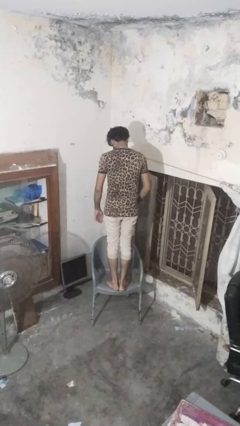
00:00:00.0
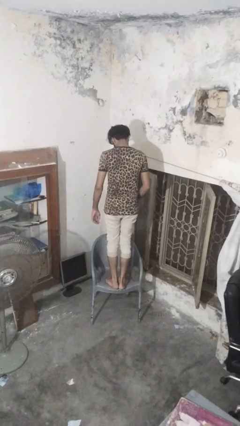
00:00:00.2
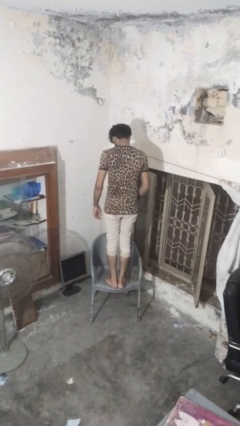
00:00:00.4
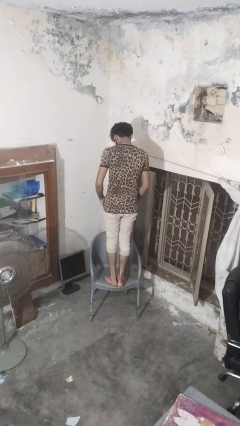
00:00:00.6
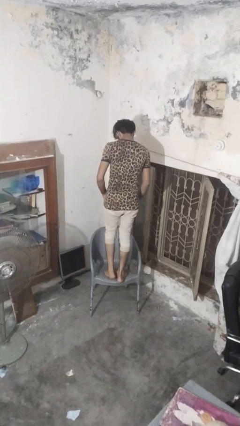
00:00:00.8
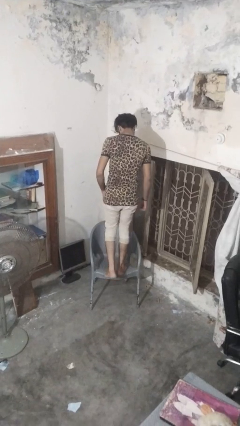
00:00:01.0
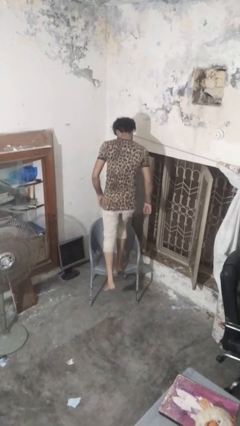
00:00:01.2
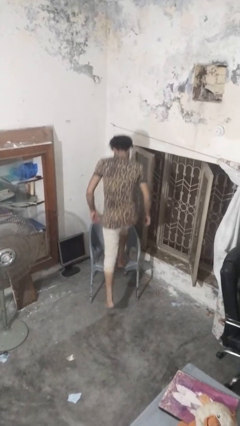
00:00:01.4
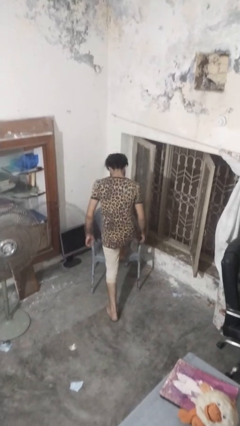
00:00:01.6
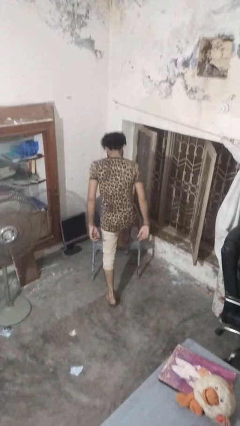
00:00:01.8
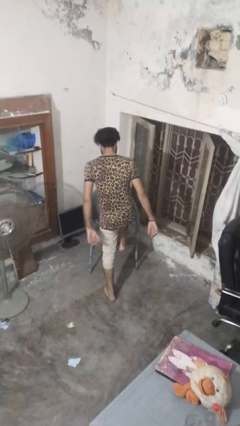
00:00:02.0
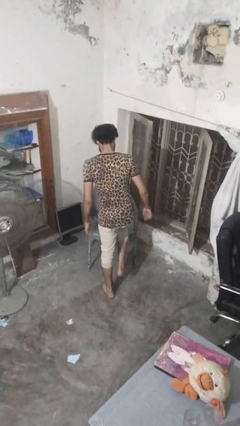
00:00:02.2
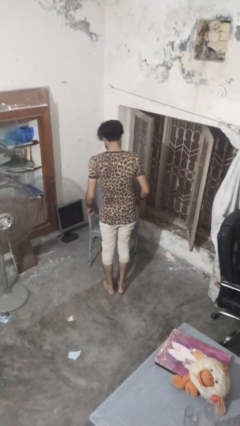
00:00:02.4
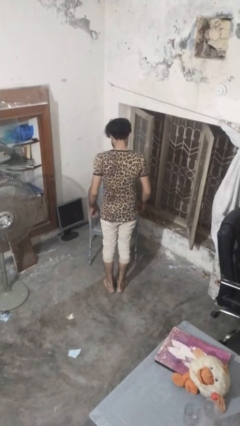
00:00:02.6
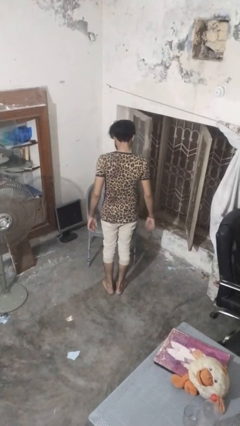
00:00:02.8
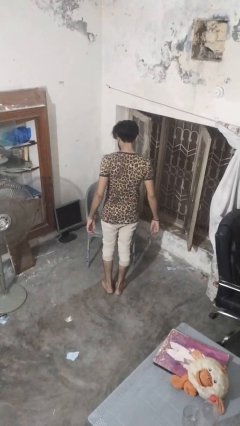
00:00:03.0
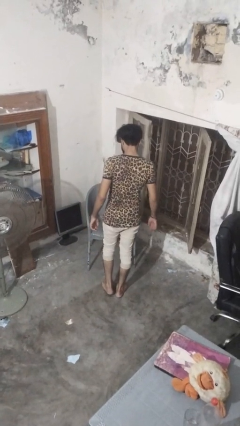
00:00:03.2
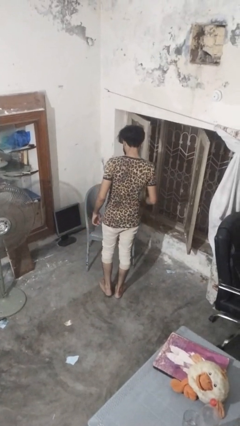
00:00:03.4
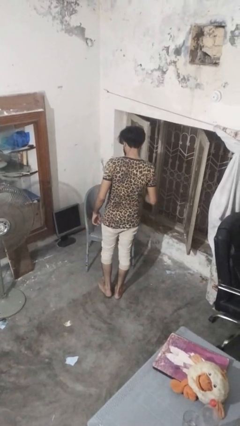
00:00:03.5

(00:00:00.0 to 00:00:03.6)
person climbs off chair

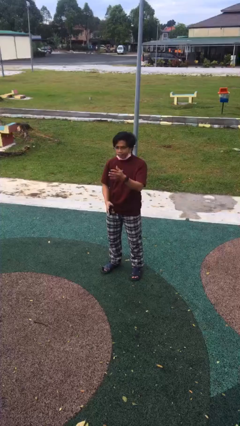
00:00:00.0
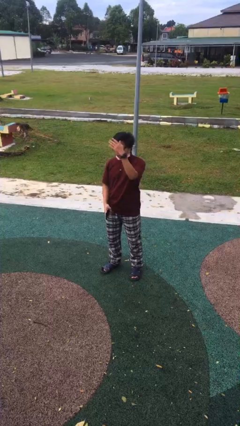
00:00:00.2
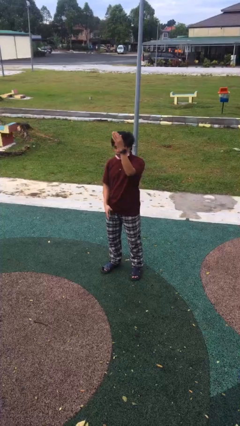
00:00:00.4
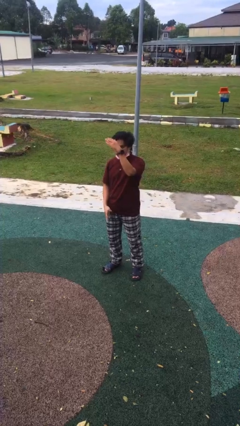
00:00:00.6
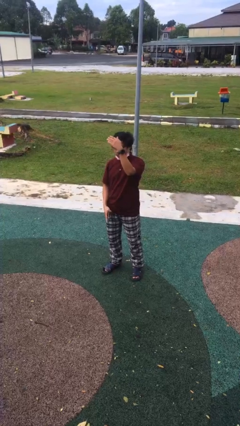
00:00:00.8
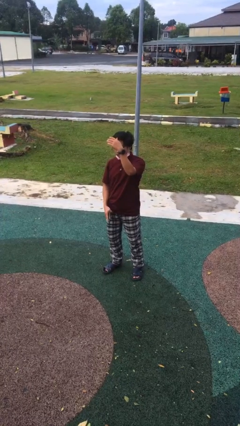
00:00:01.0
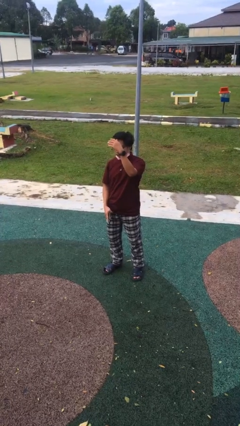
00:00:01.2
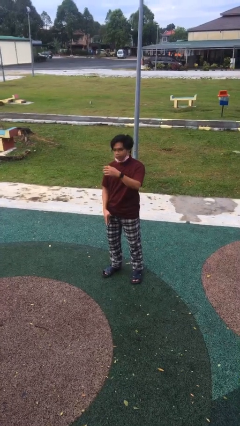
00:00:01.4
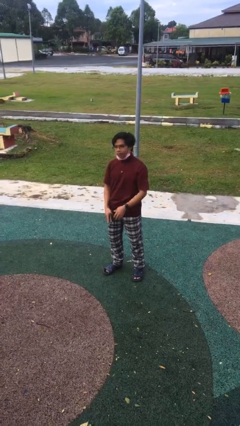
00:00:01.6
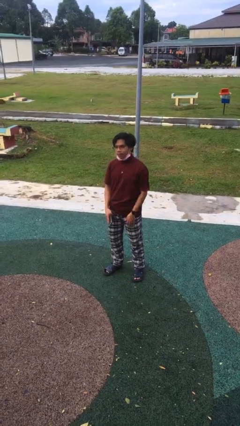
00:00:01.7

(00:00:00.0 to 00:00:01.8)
person gestures come here

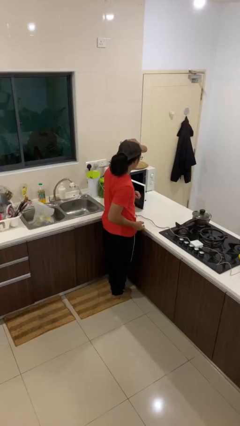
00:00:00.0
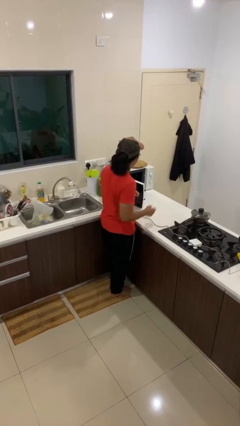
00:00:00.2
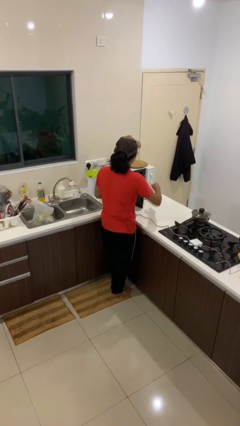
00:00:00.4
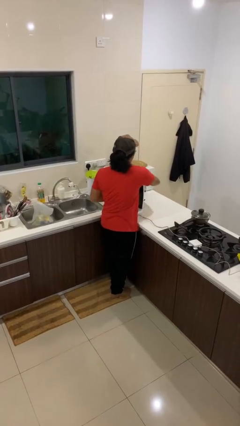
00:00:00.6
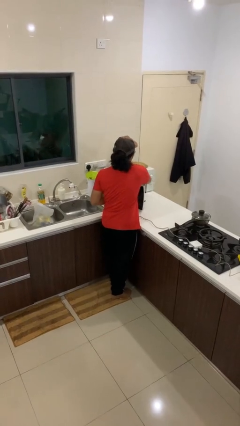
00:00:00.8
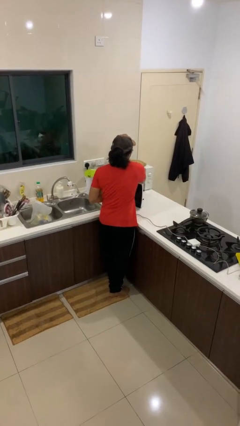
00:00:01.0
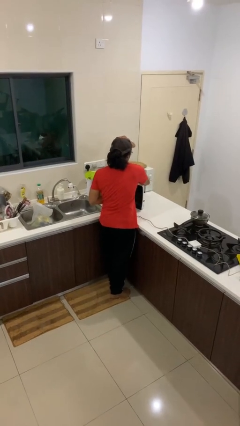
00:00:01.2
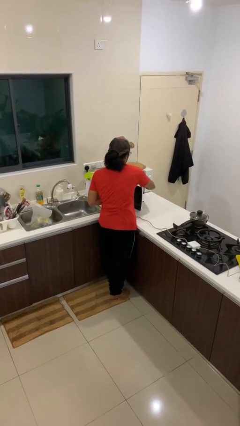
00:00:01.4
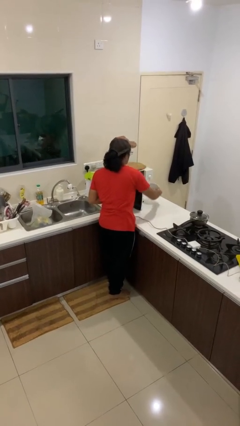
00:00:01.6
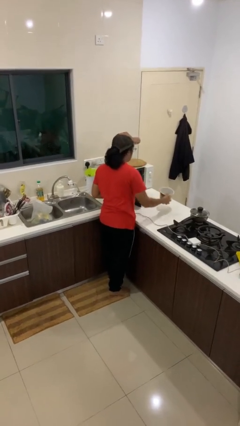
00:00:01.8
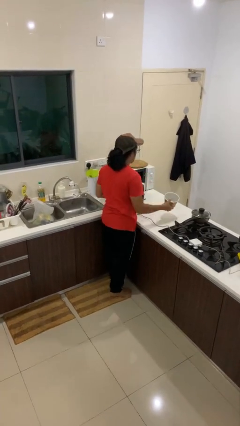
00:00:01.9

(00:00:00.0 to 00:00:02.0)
person takes object from microwave

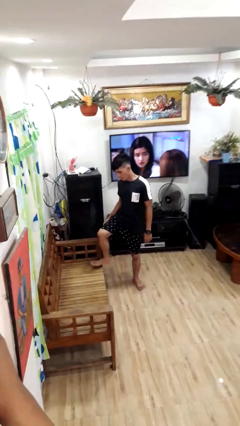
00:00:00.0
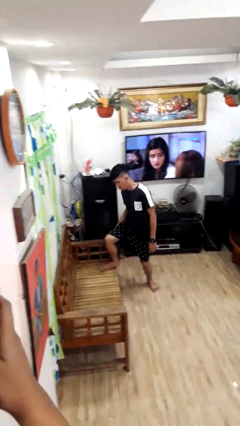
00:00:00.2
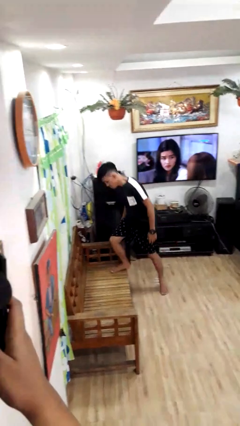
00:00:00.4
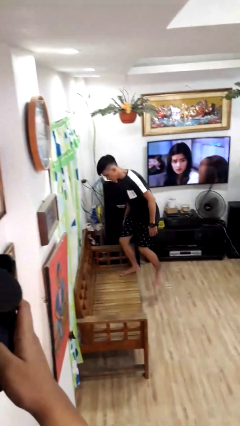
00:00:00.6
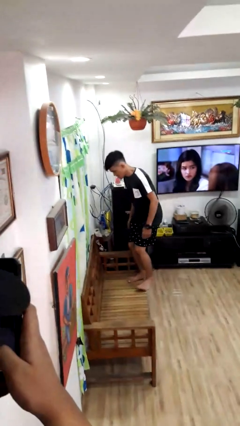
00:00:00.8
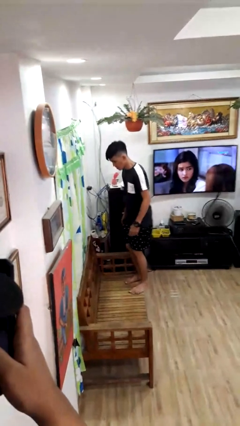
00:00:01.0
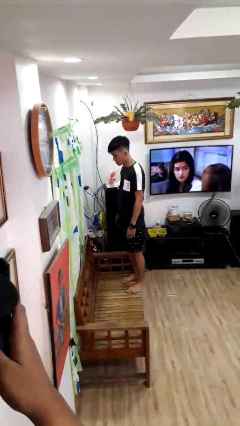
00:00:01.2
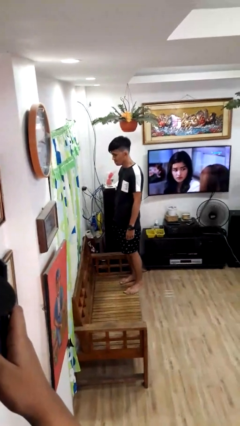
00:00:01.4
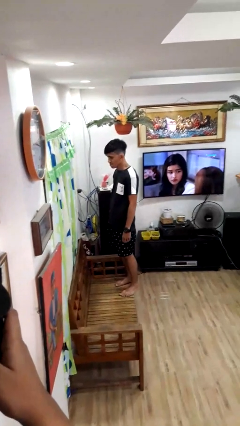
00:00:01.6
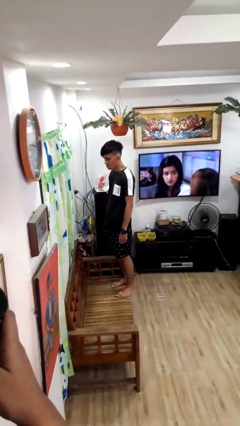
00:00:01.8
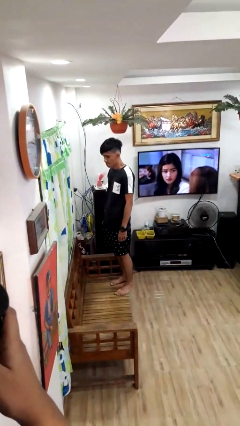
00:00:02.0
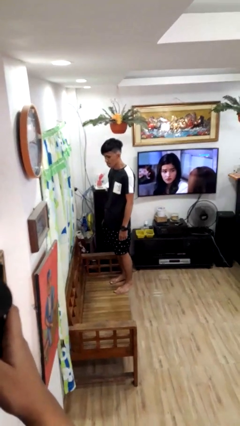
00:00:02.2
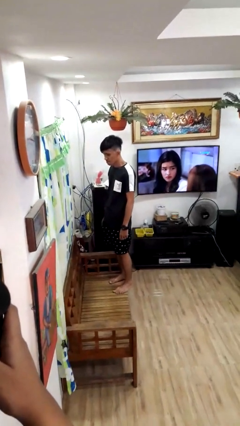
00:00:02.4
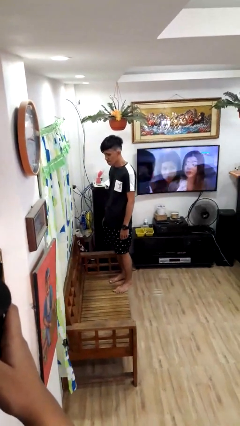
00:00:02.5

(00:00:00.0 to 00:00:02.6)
person climbs on couch

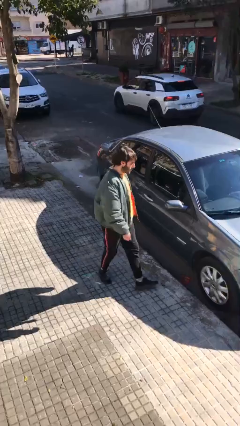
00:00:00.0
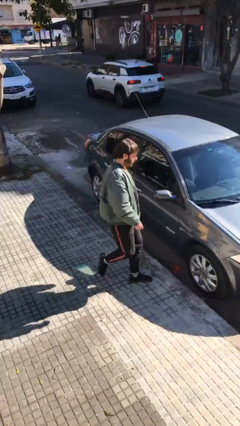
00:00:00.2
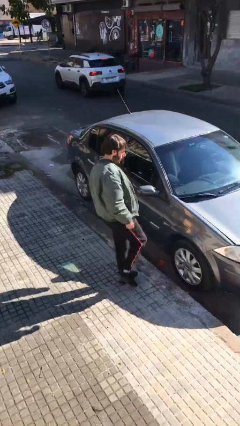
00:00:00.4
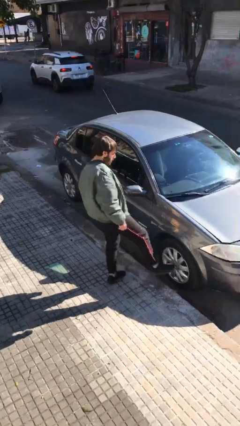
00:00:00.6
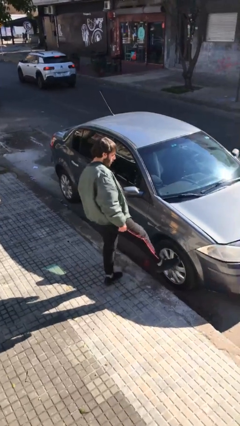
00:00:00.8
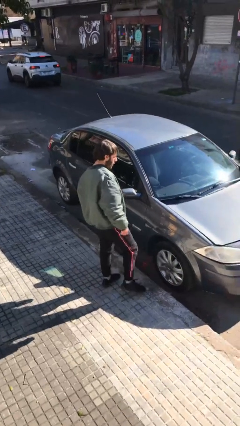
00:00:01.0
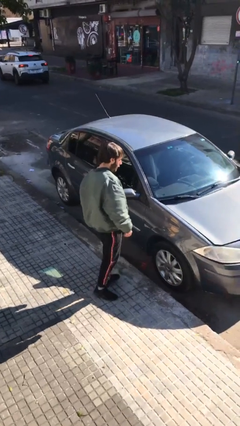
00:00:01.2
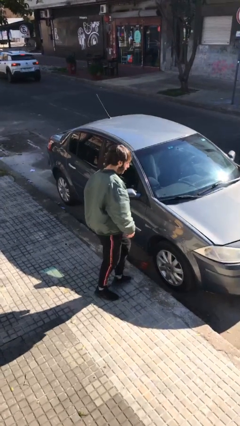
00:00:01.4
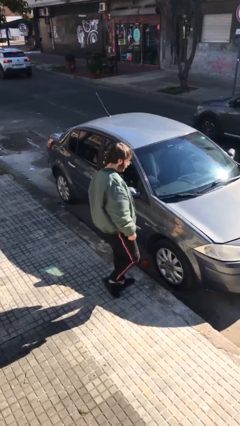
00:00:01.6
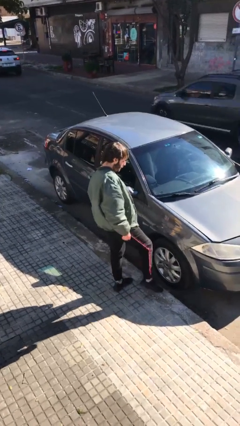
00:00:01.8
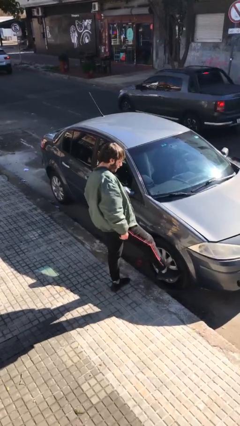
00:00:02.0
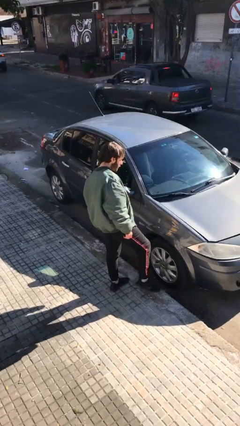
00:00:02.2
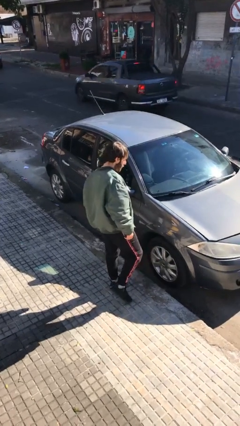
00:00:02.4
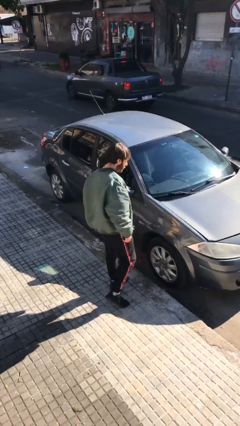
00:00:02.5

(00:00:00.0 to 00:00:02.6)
person kicks car tires

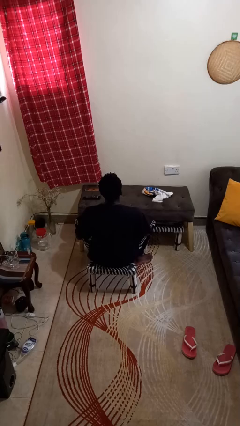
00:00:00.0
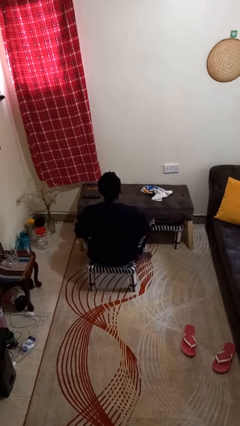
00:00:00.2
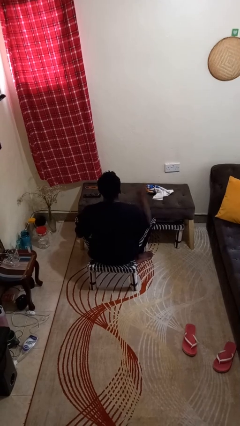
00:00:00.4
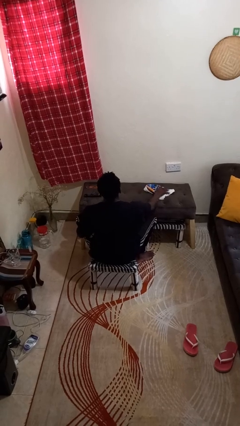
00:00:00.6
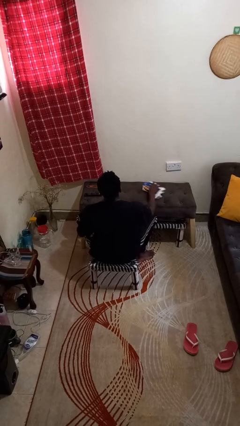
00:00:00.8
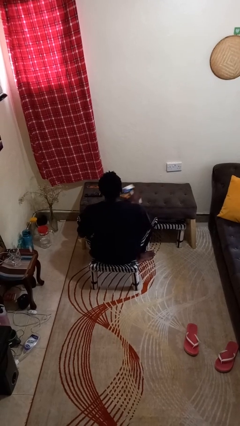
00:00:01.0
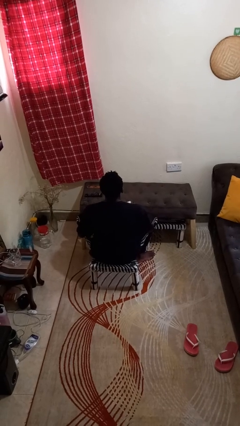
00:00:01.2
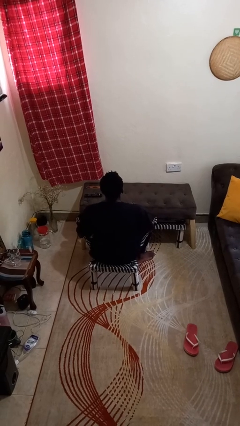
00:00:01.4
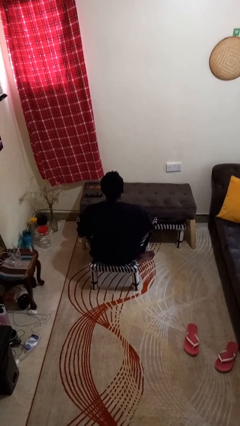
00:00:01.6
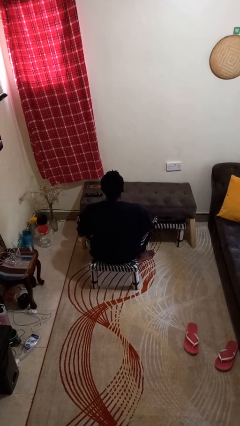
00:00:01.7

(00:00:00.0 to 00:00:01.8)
person picks up object from table

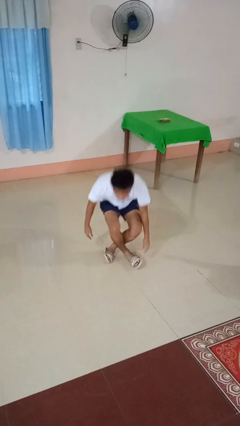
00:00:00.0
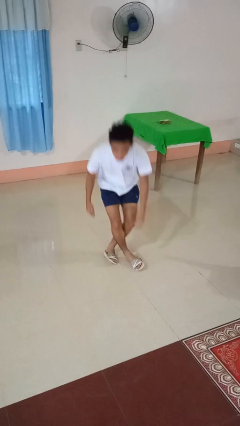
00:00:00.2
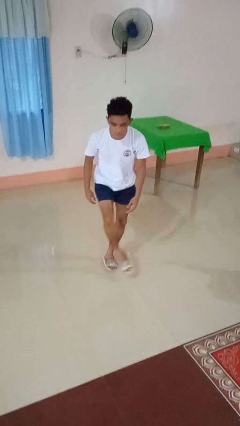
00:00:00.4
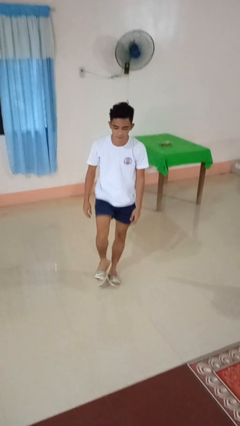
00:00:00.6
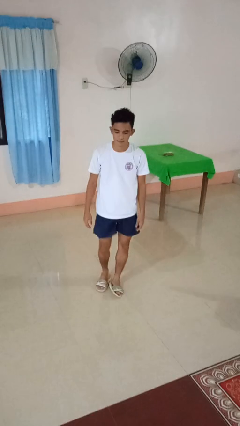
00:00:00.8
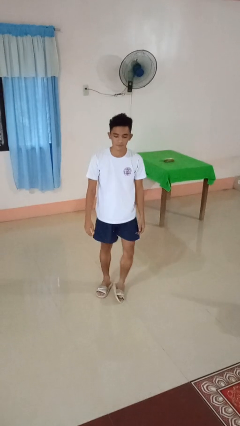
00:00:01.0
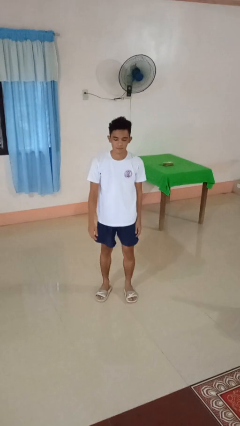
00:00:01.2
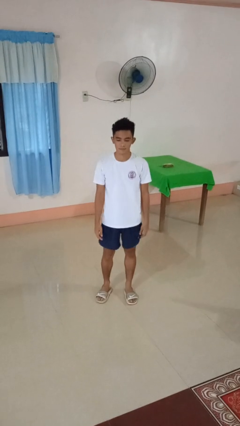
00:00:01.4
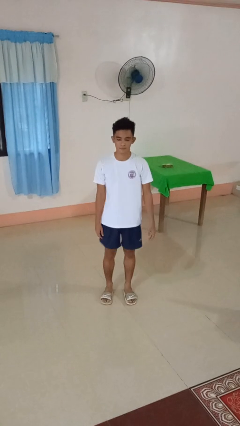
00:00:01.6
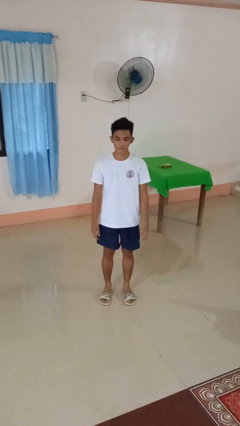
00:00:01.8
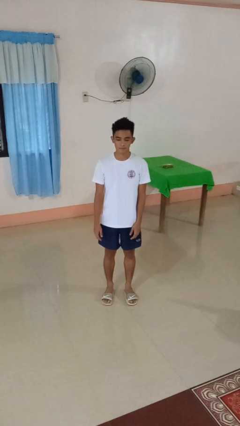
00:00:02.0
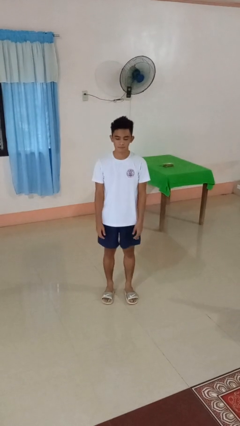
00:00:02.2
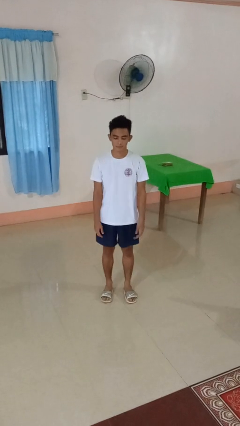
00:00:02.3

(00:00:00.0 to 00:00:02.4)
person stands up from floor

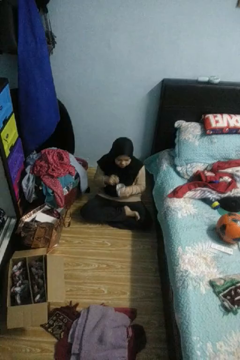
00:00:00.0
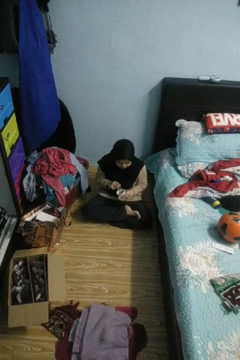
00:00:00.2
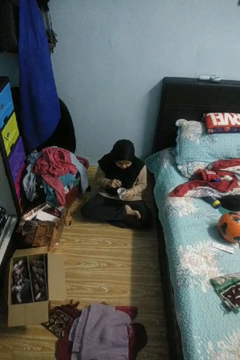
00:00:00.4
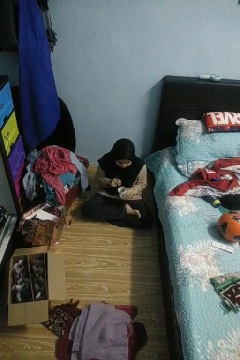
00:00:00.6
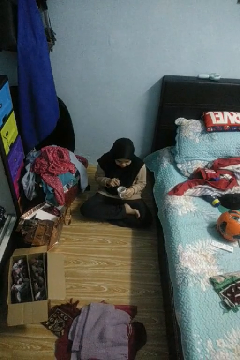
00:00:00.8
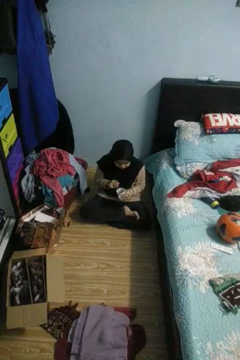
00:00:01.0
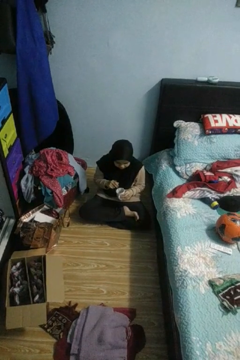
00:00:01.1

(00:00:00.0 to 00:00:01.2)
person stirs mug
